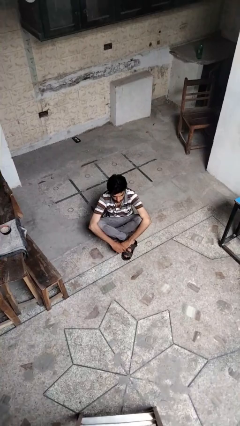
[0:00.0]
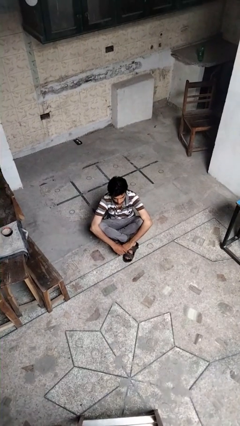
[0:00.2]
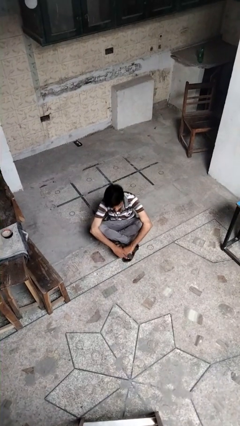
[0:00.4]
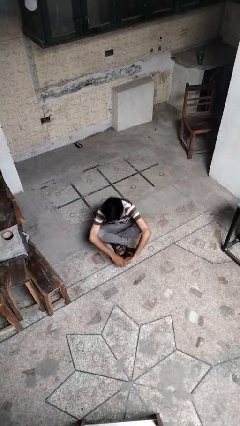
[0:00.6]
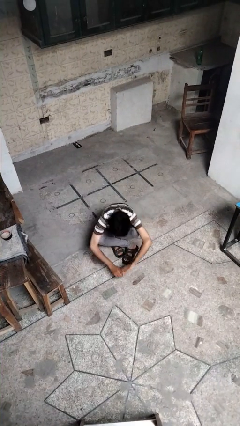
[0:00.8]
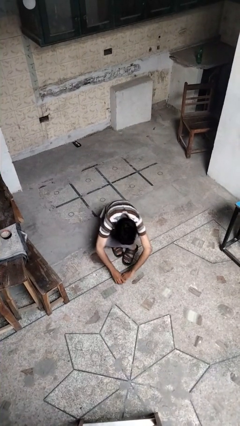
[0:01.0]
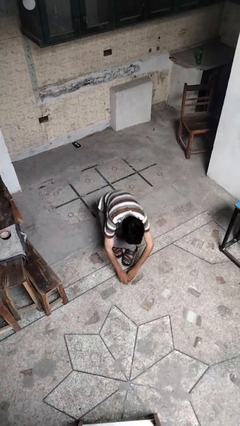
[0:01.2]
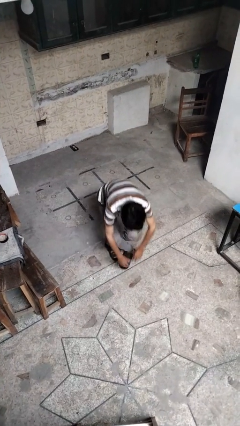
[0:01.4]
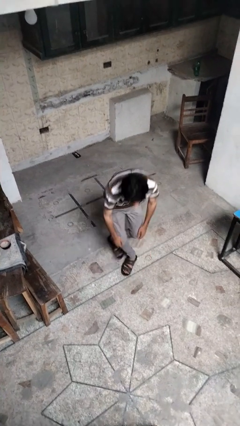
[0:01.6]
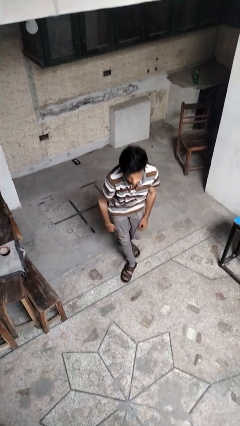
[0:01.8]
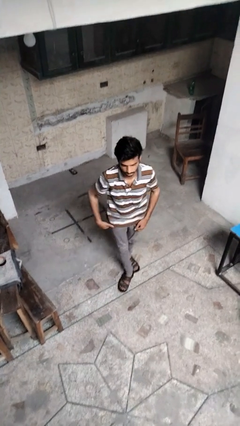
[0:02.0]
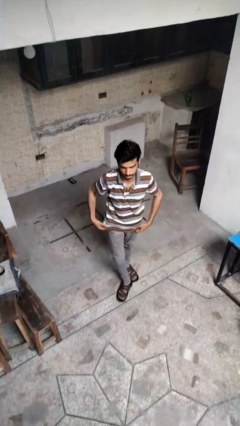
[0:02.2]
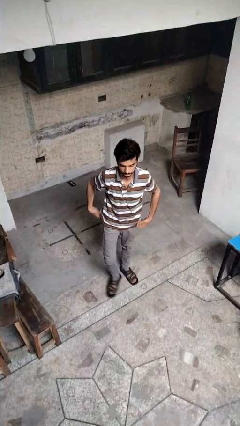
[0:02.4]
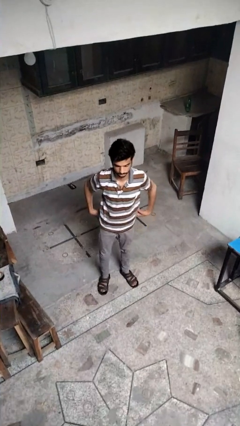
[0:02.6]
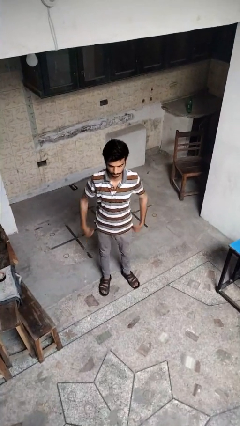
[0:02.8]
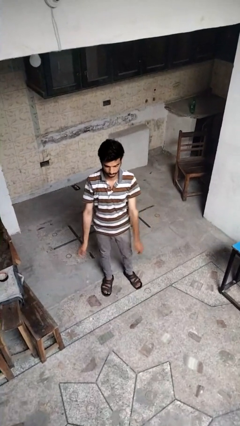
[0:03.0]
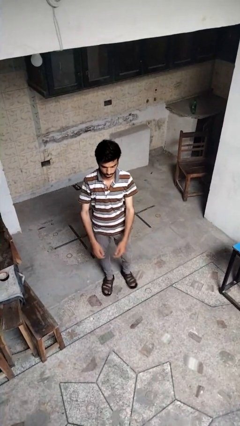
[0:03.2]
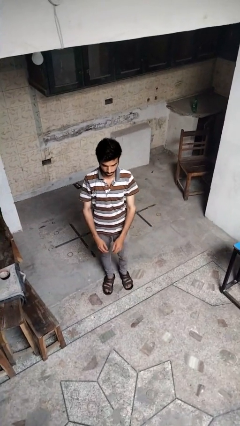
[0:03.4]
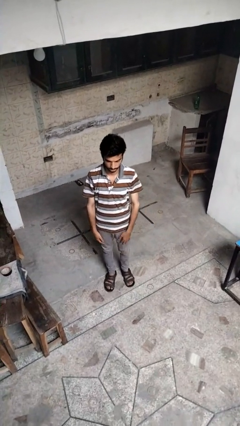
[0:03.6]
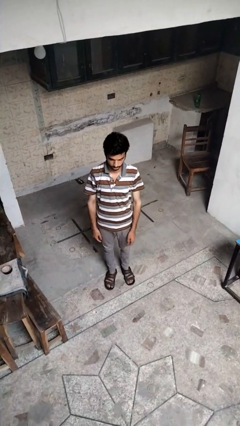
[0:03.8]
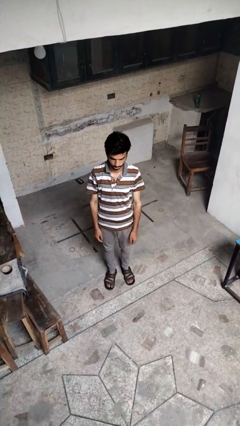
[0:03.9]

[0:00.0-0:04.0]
person stands up from floor

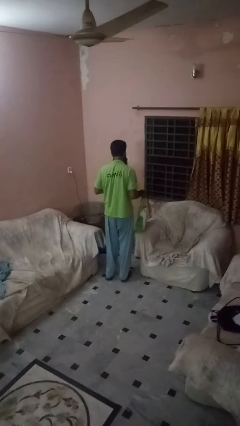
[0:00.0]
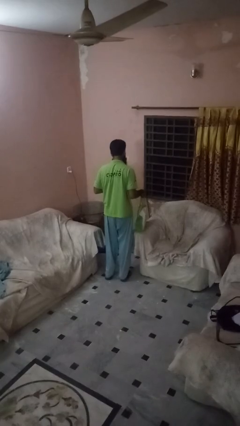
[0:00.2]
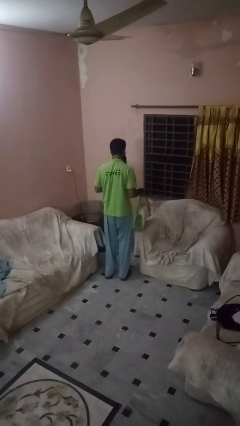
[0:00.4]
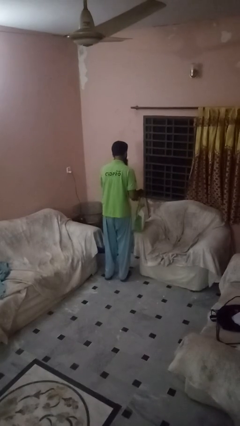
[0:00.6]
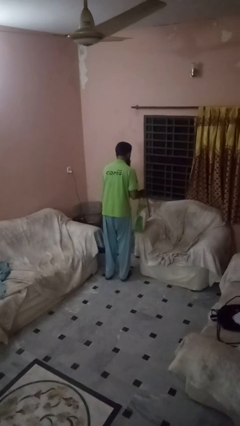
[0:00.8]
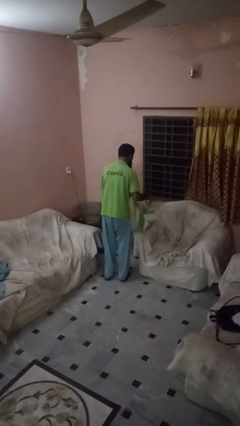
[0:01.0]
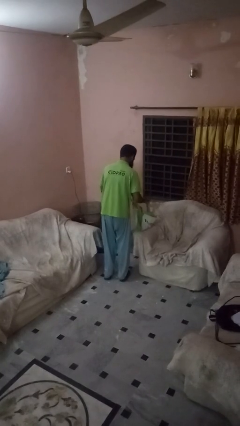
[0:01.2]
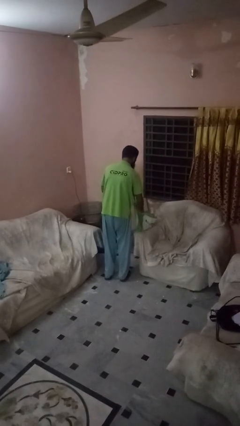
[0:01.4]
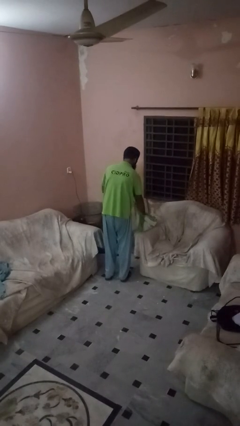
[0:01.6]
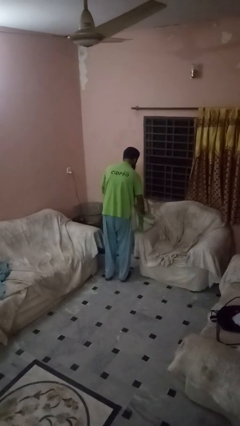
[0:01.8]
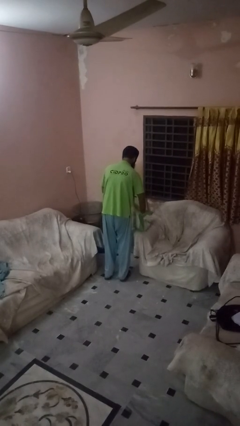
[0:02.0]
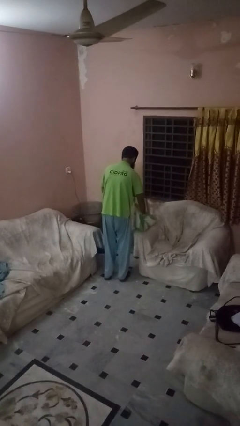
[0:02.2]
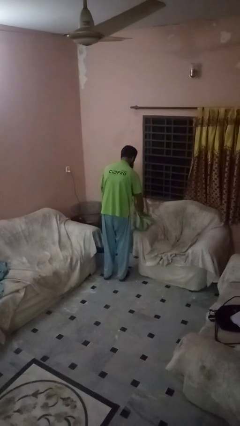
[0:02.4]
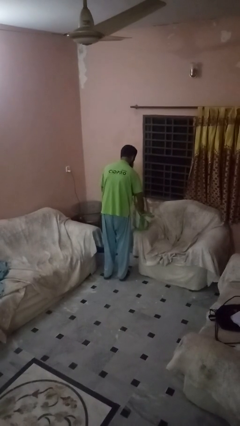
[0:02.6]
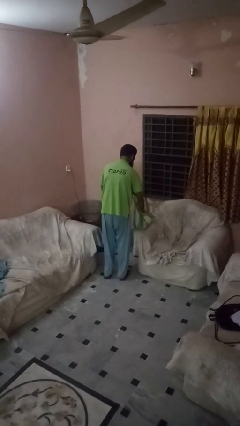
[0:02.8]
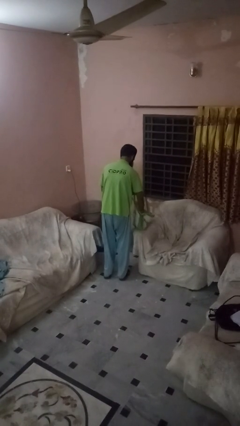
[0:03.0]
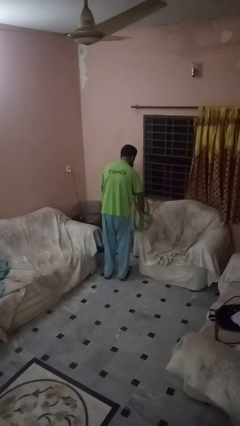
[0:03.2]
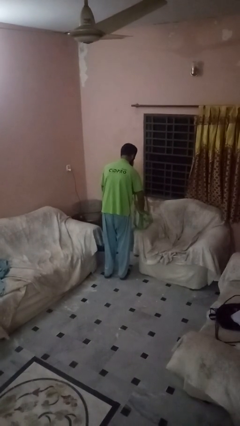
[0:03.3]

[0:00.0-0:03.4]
person searches in bag

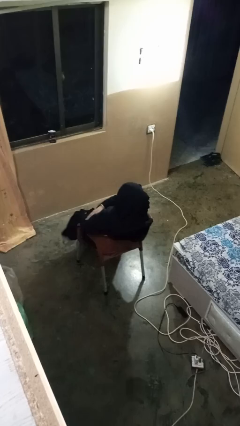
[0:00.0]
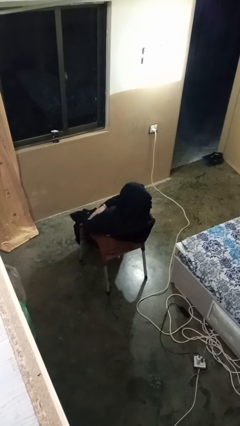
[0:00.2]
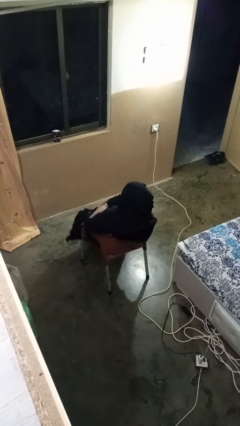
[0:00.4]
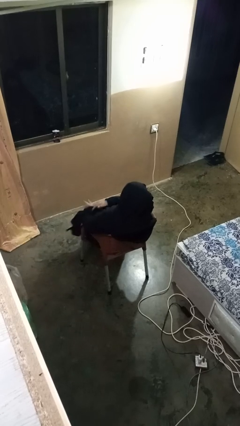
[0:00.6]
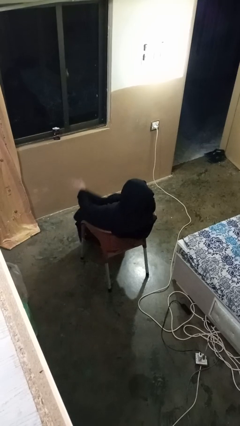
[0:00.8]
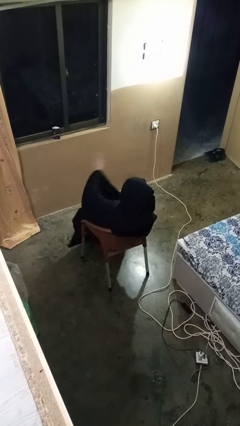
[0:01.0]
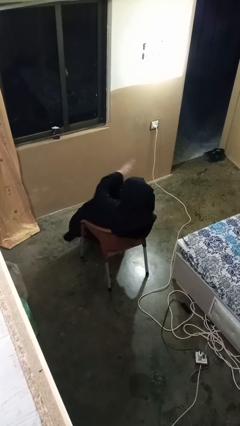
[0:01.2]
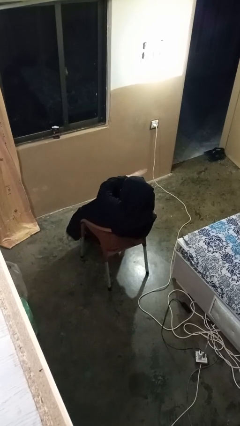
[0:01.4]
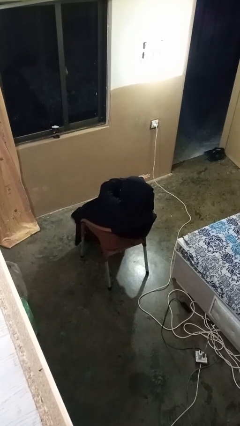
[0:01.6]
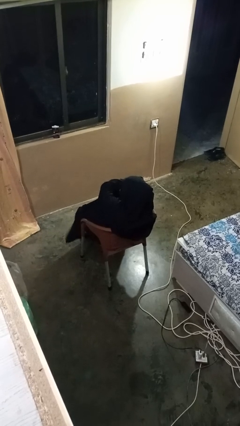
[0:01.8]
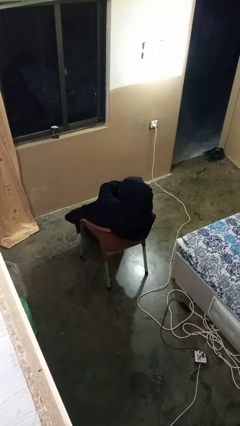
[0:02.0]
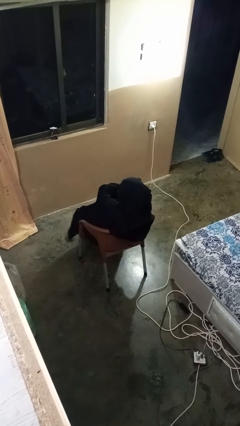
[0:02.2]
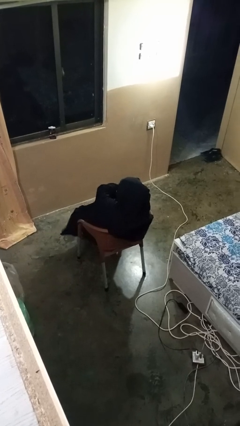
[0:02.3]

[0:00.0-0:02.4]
person gestures swipe right

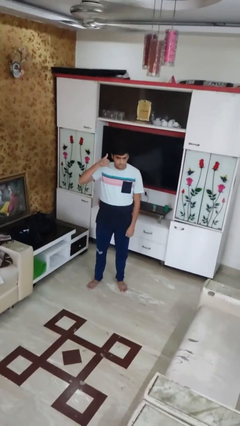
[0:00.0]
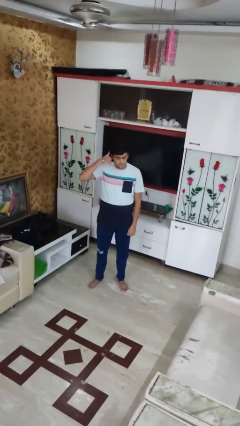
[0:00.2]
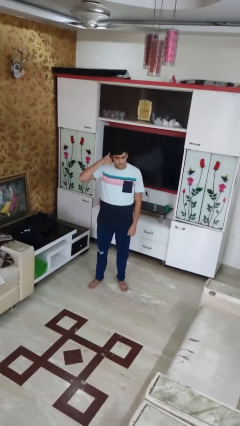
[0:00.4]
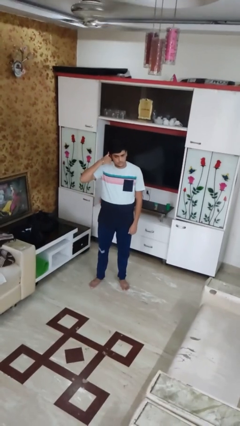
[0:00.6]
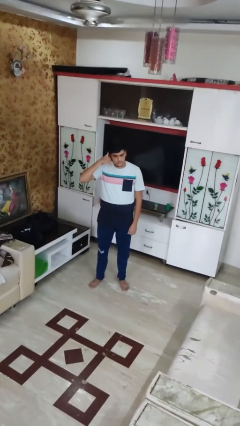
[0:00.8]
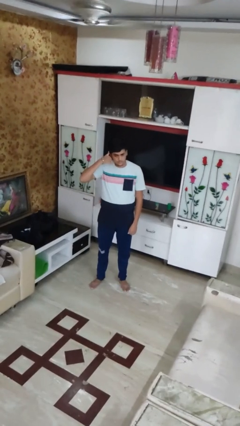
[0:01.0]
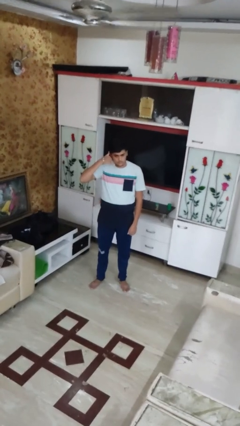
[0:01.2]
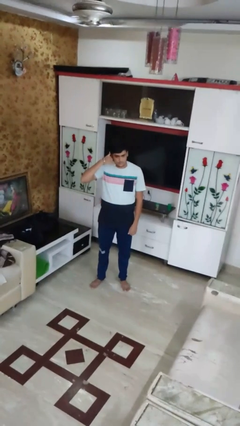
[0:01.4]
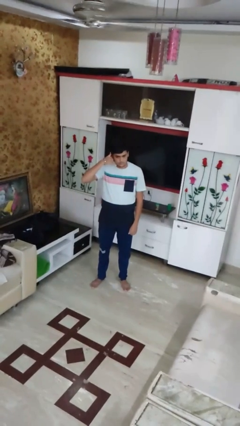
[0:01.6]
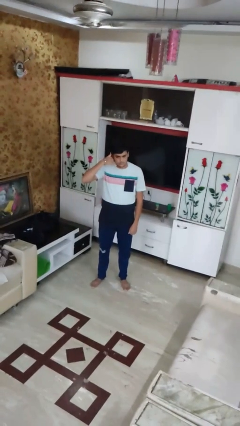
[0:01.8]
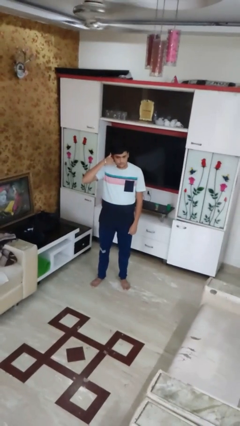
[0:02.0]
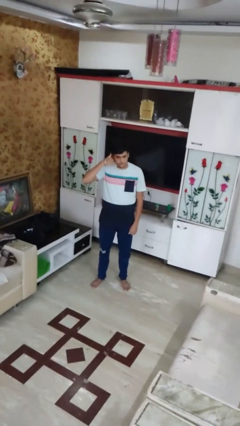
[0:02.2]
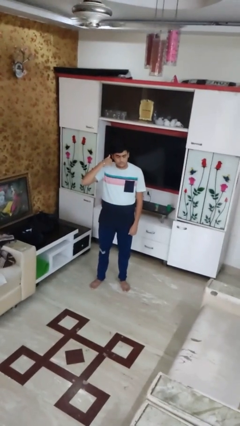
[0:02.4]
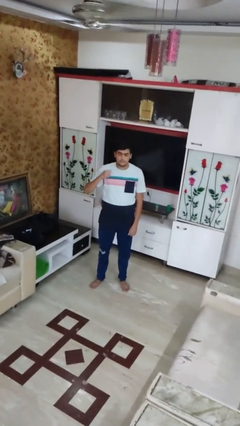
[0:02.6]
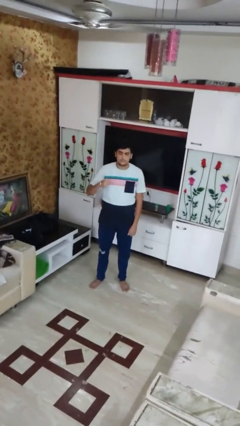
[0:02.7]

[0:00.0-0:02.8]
person gestures call me

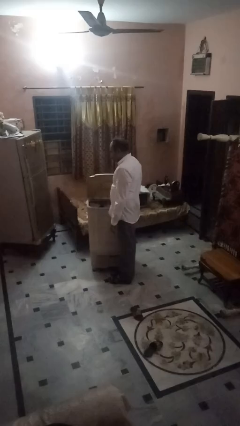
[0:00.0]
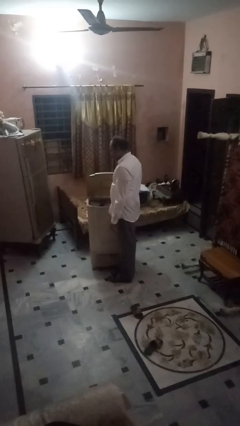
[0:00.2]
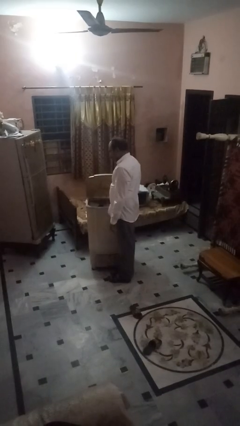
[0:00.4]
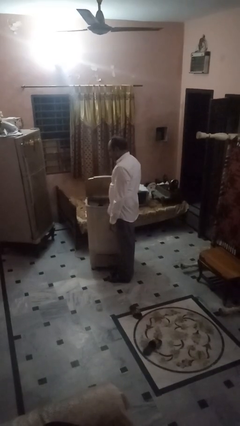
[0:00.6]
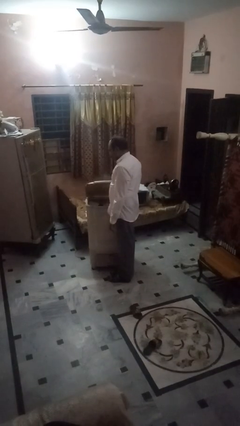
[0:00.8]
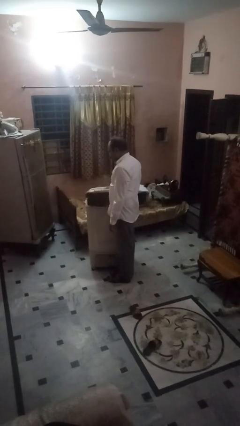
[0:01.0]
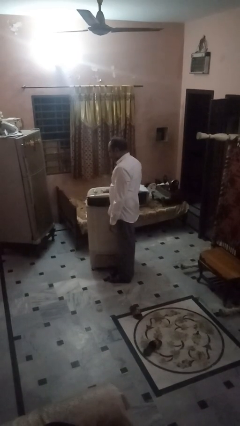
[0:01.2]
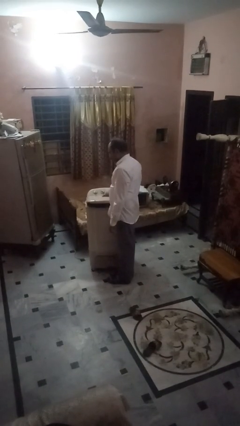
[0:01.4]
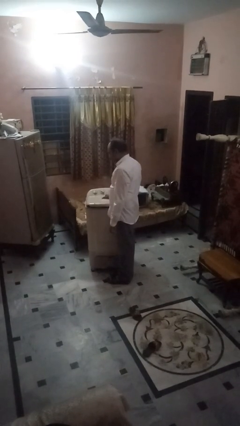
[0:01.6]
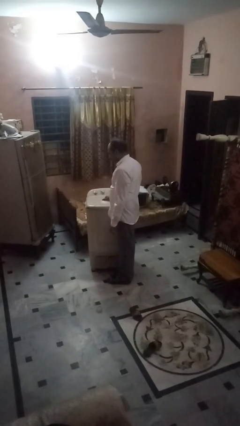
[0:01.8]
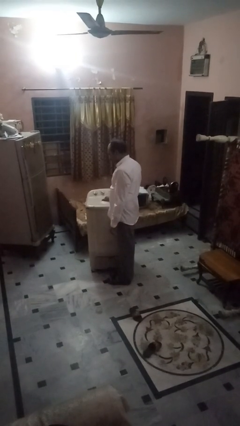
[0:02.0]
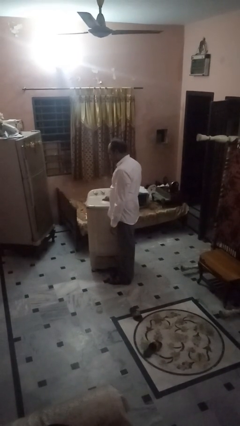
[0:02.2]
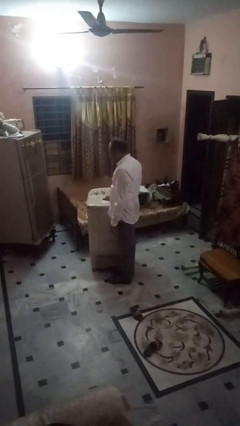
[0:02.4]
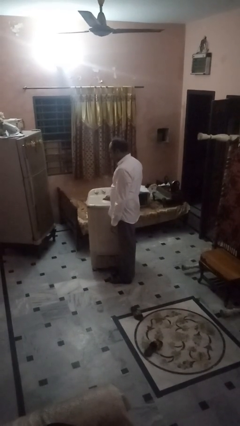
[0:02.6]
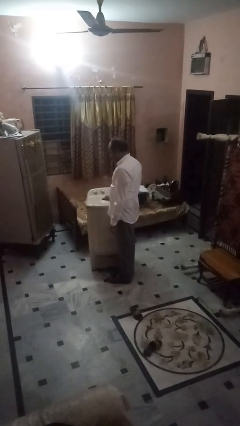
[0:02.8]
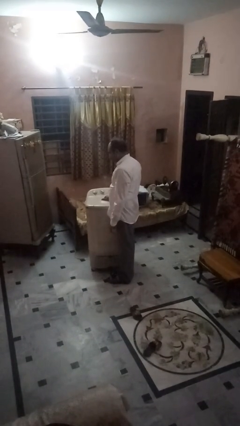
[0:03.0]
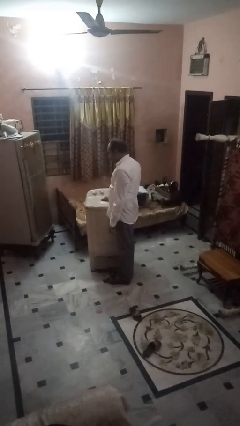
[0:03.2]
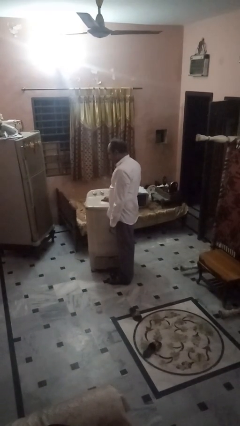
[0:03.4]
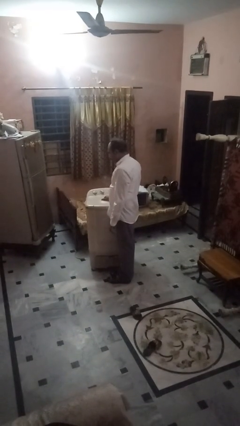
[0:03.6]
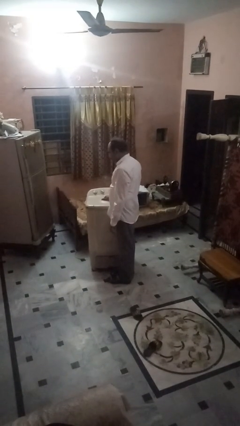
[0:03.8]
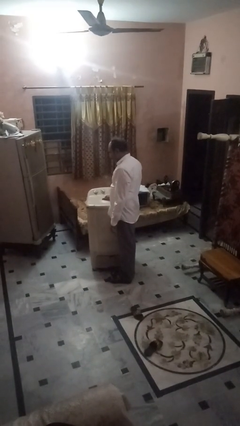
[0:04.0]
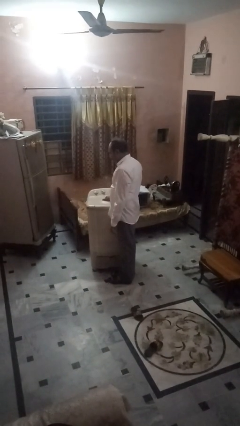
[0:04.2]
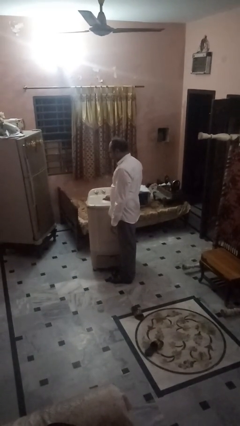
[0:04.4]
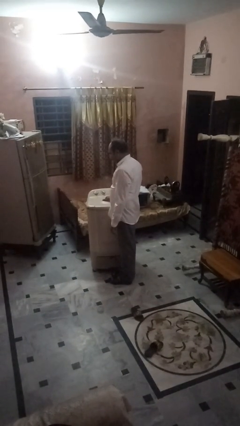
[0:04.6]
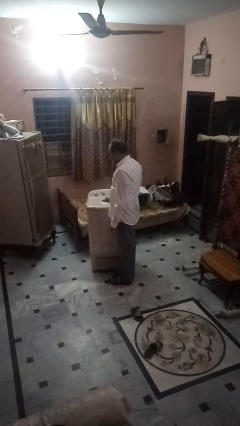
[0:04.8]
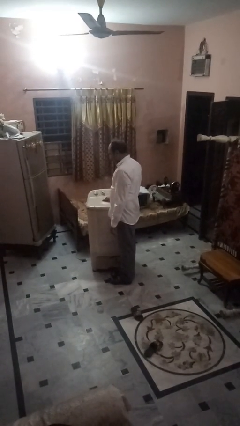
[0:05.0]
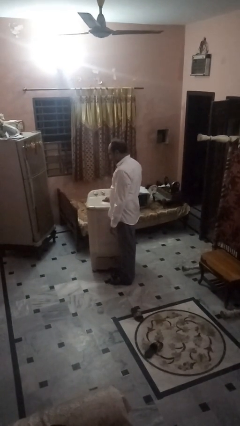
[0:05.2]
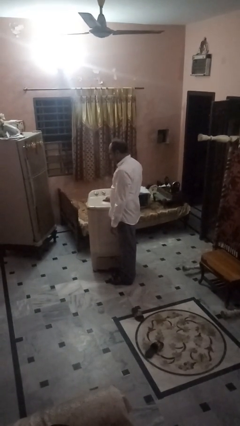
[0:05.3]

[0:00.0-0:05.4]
person closes clothes washer
